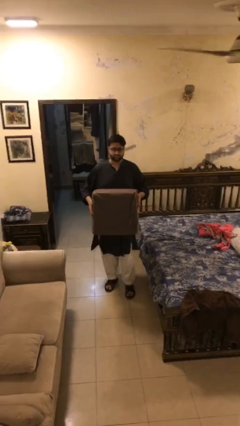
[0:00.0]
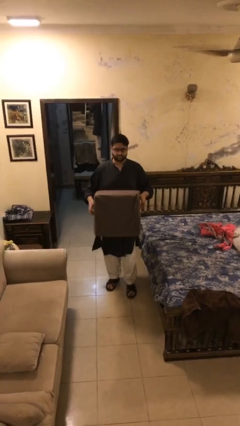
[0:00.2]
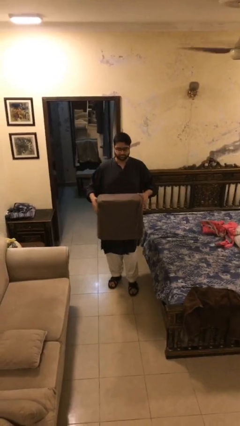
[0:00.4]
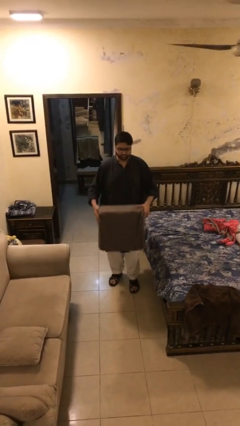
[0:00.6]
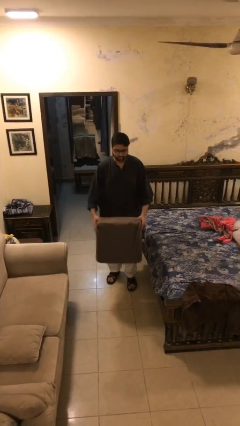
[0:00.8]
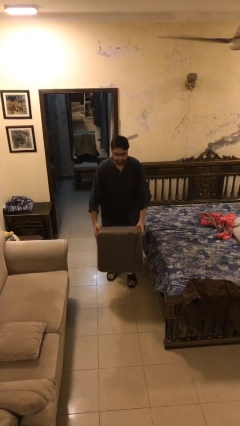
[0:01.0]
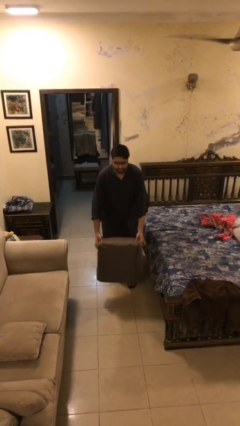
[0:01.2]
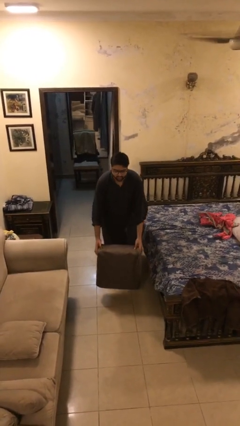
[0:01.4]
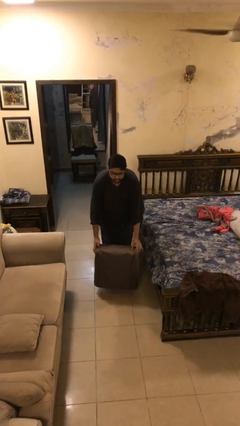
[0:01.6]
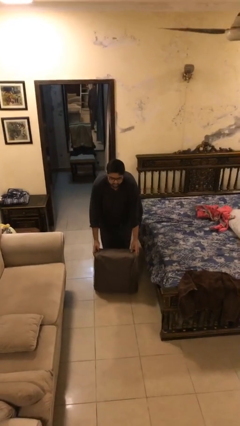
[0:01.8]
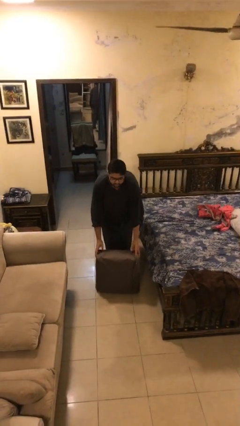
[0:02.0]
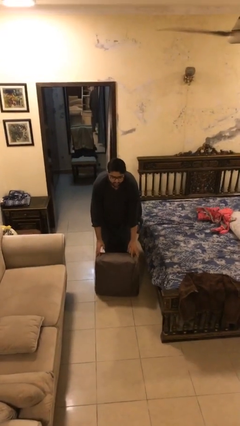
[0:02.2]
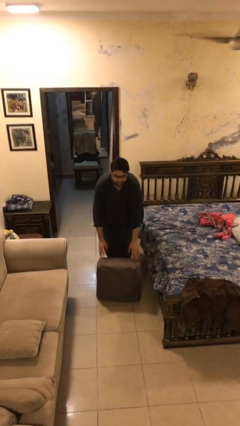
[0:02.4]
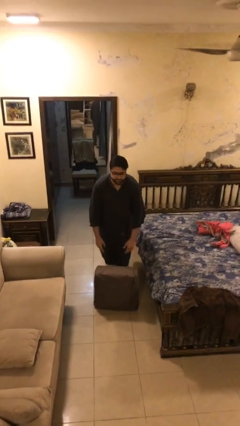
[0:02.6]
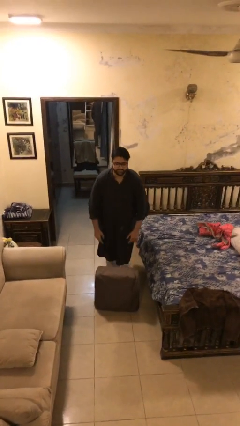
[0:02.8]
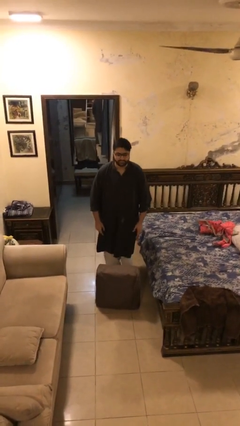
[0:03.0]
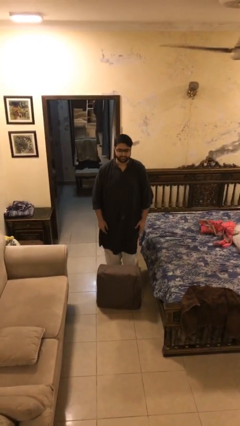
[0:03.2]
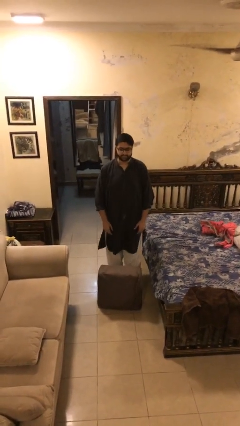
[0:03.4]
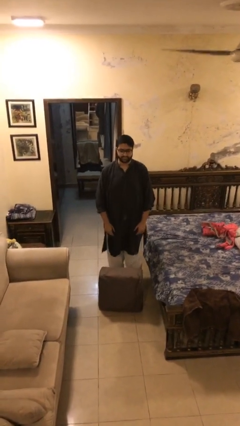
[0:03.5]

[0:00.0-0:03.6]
person puts down object on floor

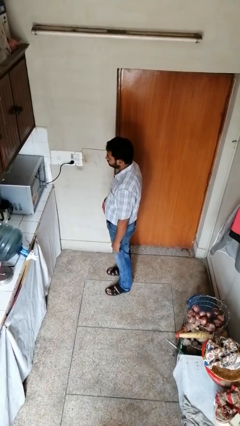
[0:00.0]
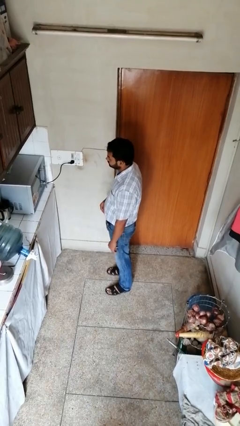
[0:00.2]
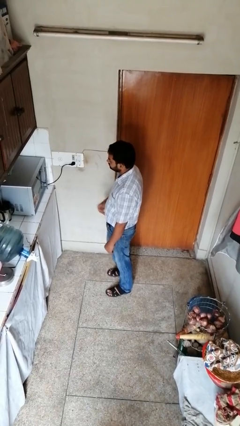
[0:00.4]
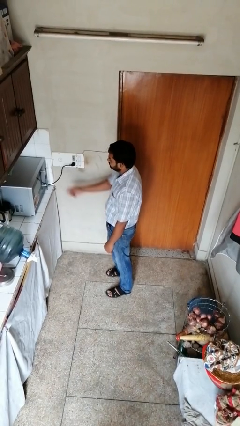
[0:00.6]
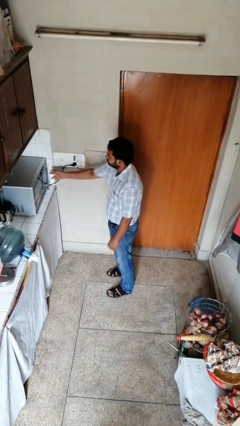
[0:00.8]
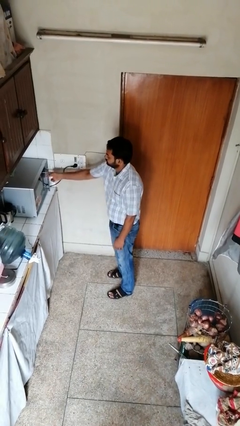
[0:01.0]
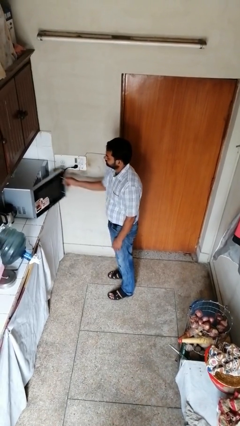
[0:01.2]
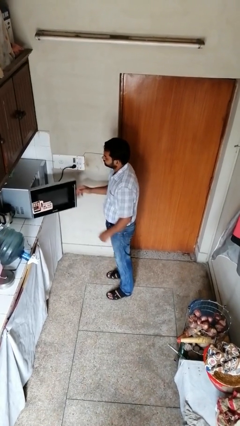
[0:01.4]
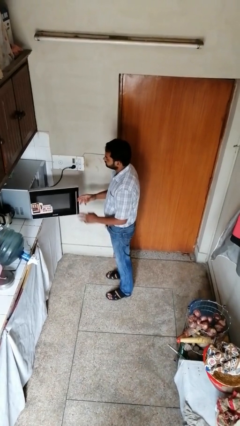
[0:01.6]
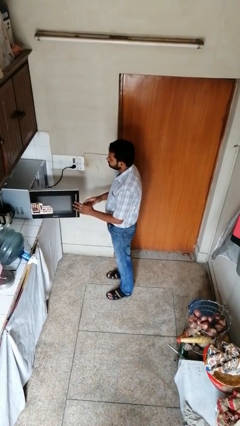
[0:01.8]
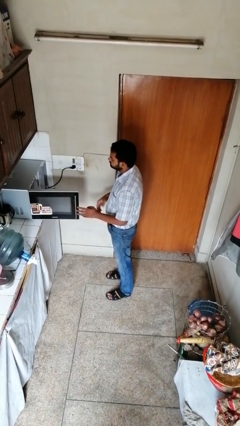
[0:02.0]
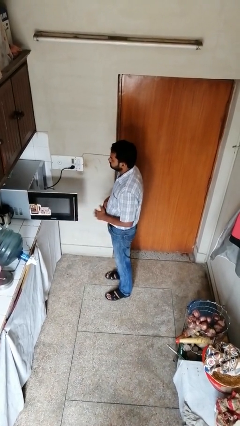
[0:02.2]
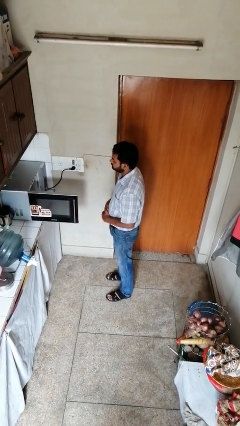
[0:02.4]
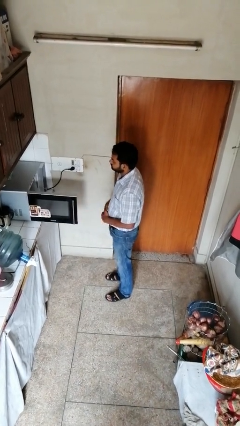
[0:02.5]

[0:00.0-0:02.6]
person opens oven door

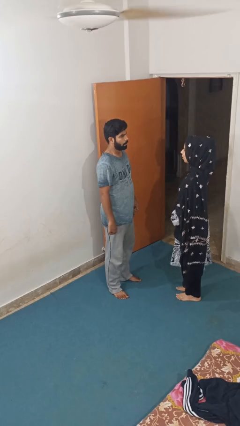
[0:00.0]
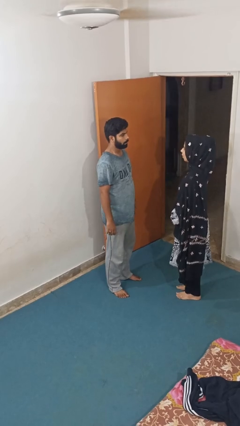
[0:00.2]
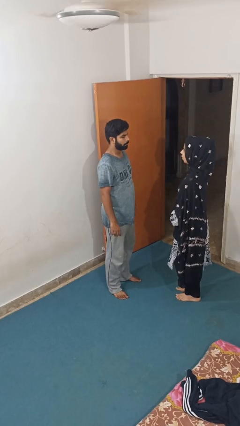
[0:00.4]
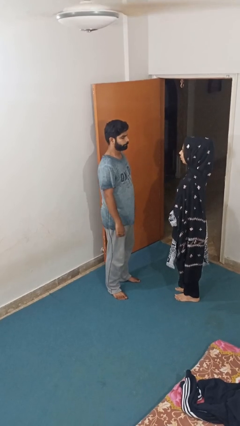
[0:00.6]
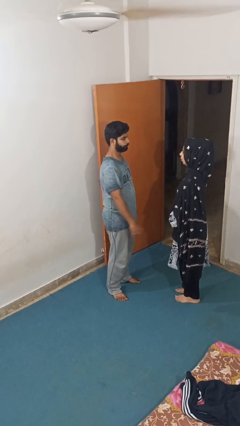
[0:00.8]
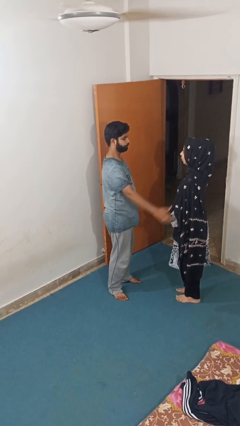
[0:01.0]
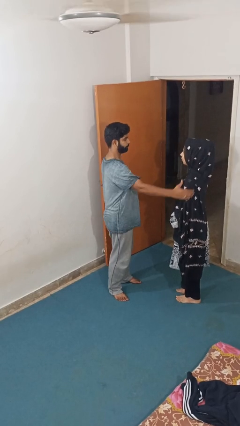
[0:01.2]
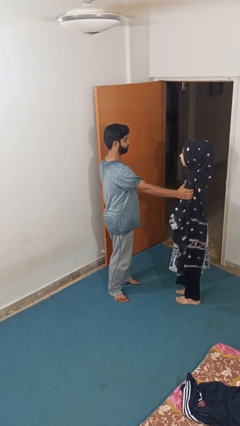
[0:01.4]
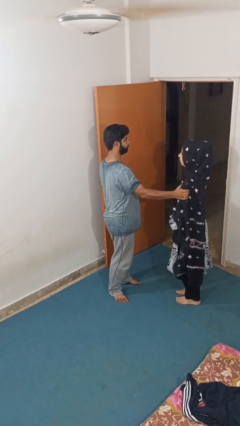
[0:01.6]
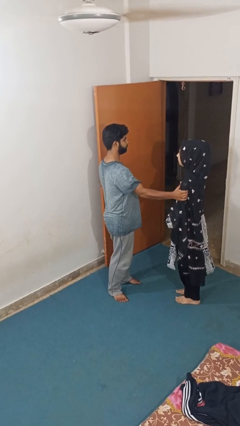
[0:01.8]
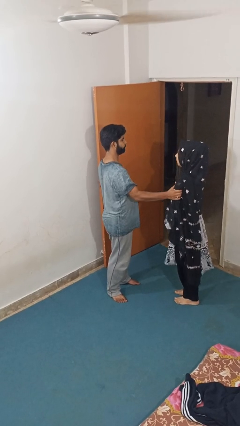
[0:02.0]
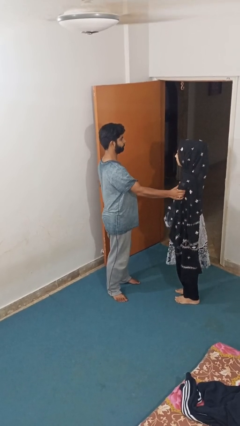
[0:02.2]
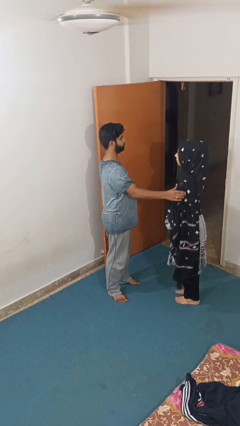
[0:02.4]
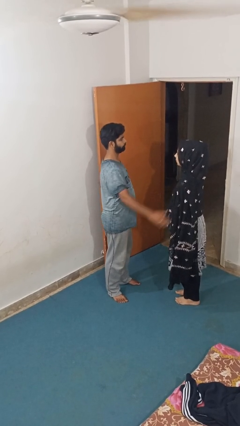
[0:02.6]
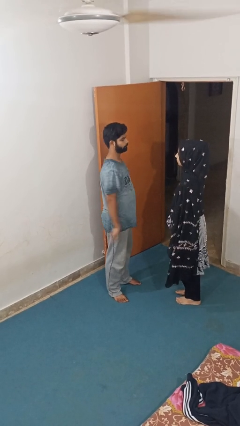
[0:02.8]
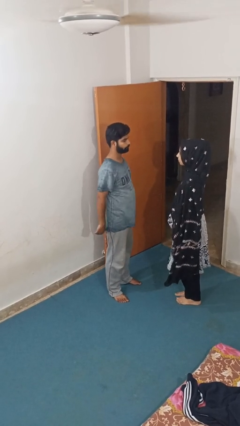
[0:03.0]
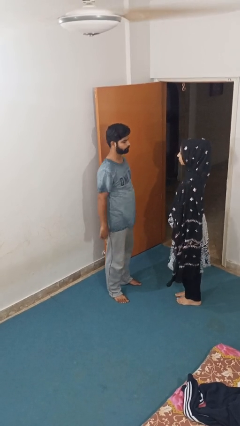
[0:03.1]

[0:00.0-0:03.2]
person grabs person by bicep

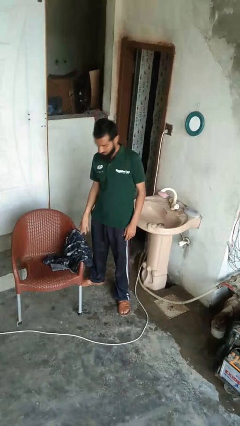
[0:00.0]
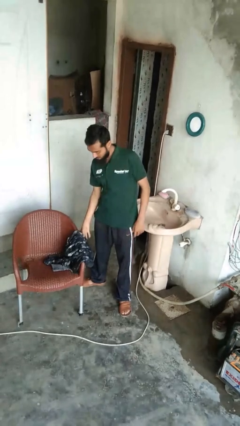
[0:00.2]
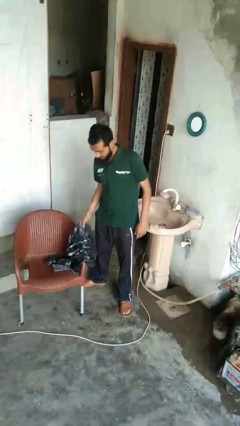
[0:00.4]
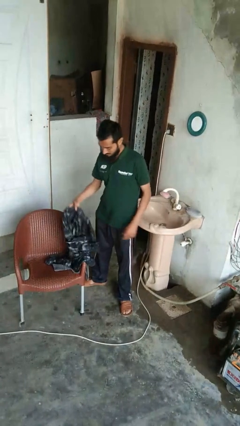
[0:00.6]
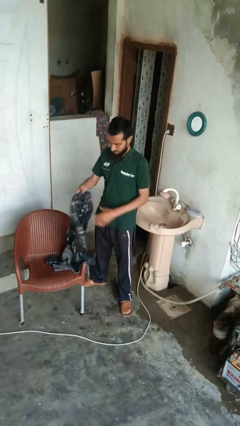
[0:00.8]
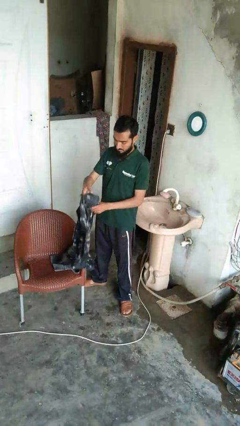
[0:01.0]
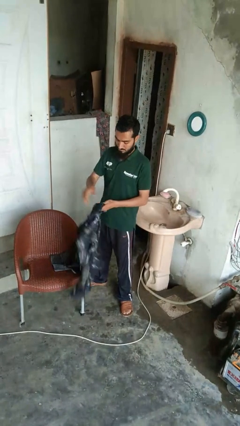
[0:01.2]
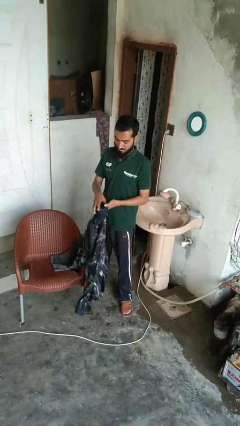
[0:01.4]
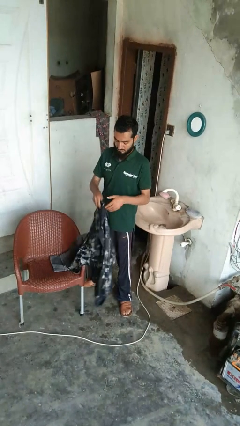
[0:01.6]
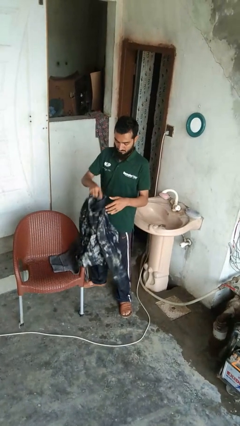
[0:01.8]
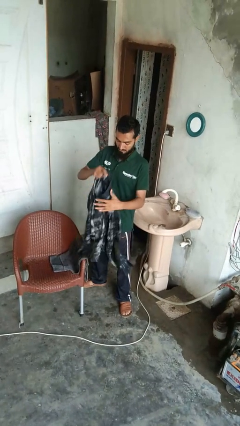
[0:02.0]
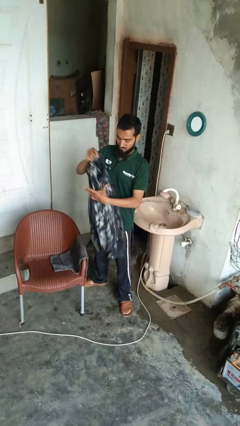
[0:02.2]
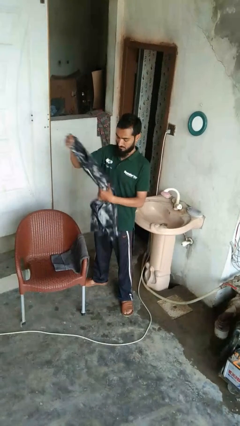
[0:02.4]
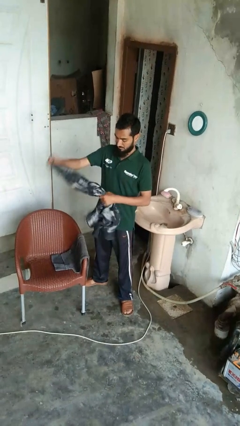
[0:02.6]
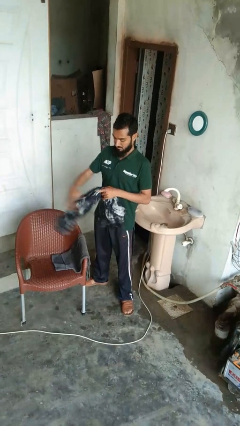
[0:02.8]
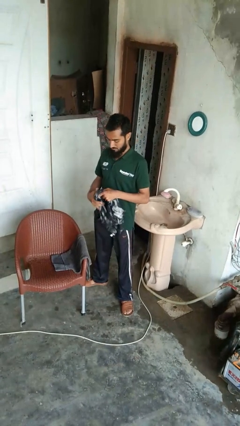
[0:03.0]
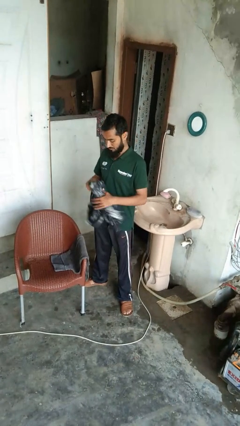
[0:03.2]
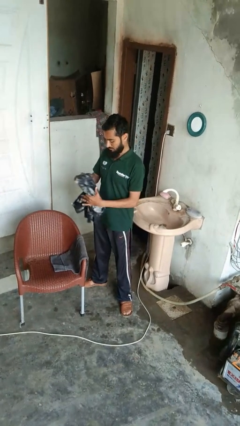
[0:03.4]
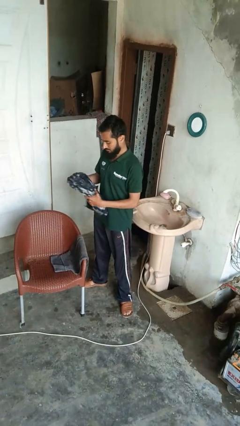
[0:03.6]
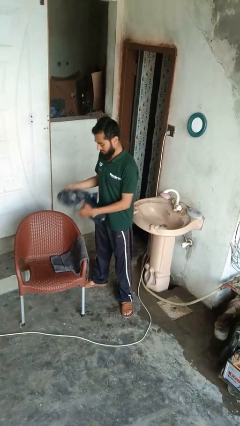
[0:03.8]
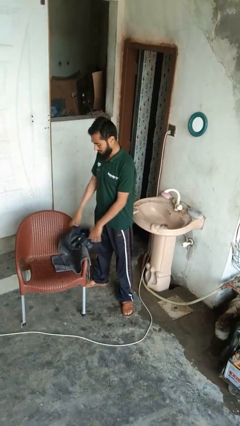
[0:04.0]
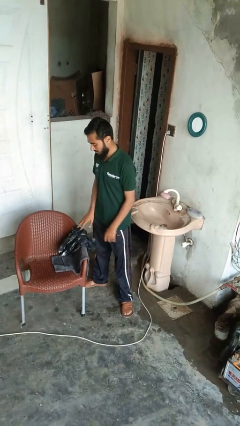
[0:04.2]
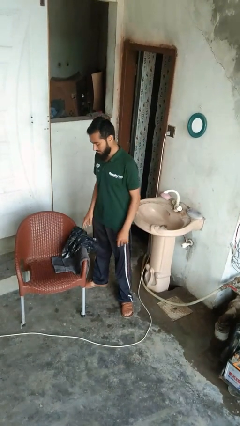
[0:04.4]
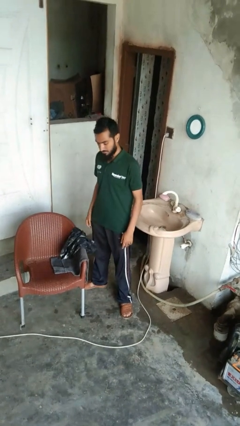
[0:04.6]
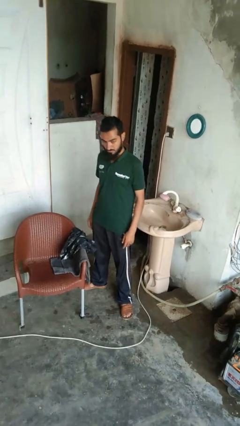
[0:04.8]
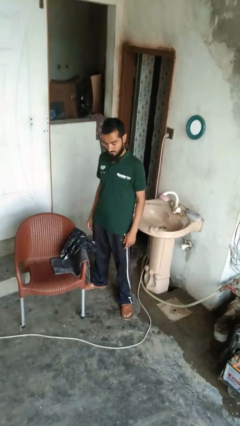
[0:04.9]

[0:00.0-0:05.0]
person folds shirt

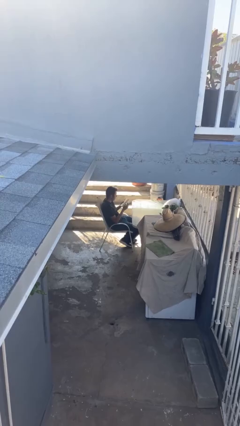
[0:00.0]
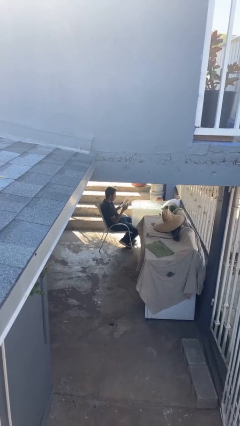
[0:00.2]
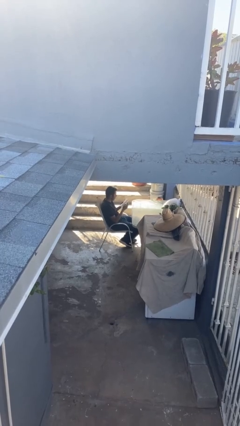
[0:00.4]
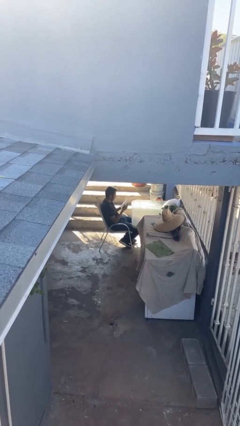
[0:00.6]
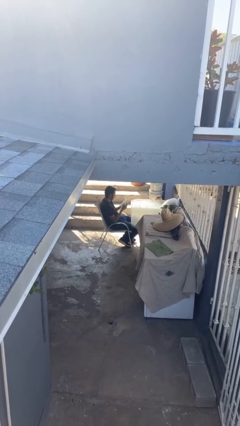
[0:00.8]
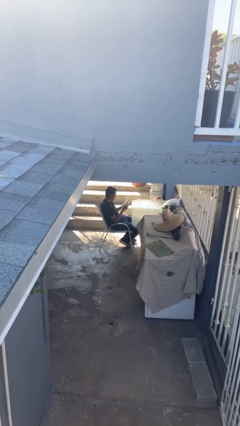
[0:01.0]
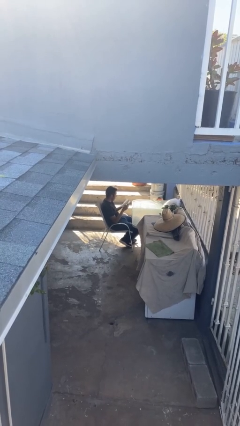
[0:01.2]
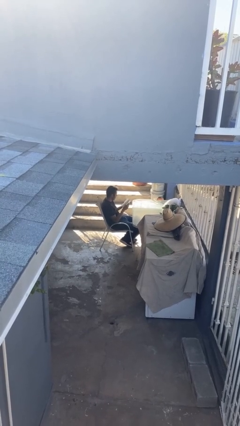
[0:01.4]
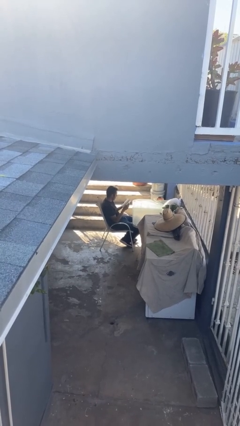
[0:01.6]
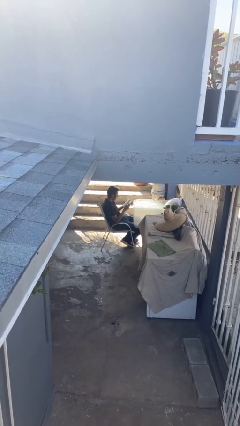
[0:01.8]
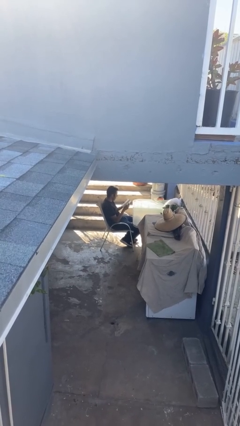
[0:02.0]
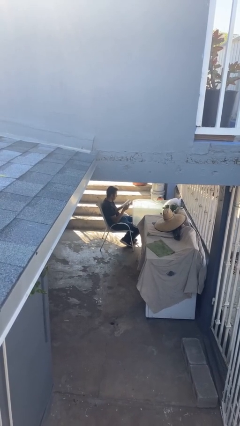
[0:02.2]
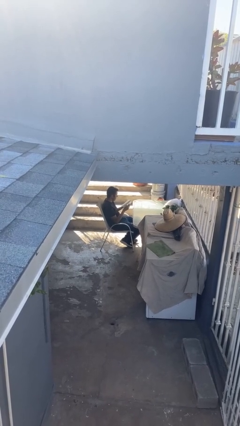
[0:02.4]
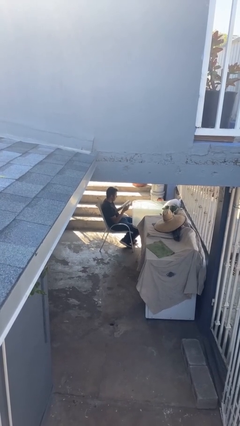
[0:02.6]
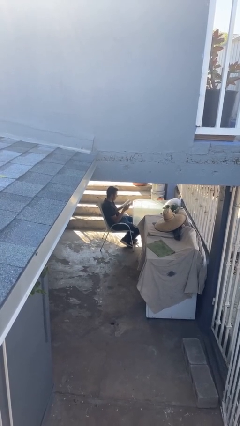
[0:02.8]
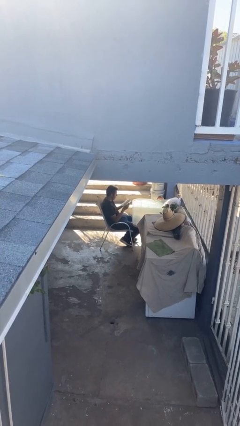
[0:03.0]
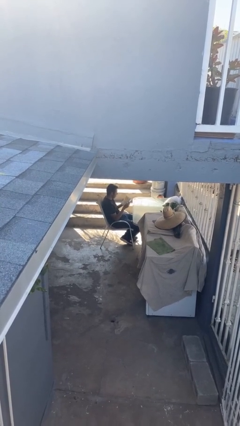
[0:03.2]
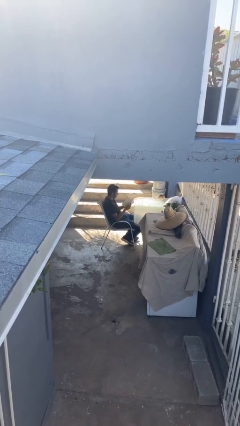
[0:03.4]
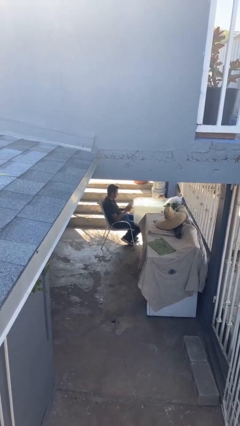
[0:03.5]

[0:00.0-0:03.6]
person reads document
